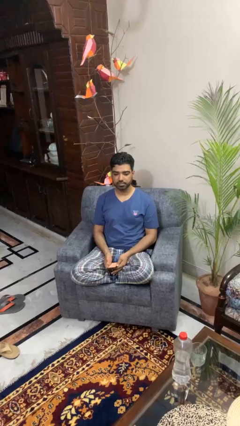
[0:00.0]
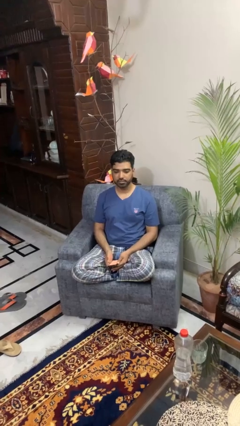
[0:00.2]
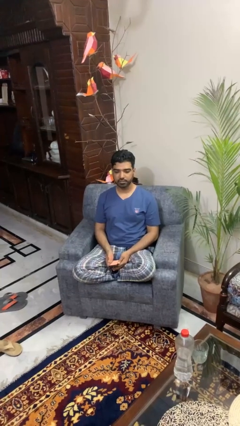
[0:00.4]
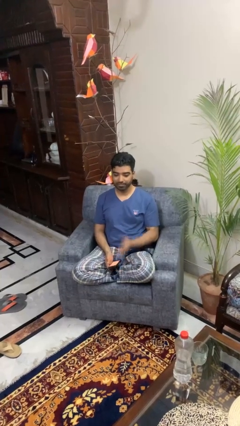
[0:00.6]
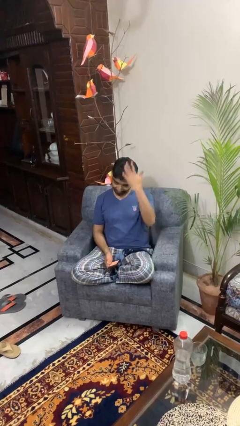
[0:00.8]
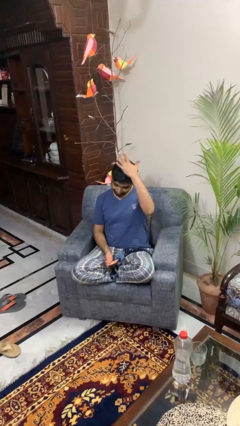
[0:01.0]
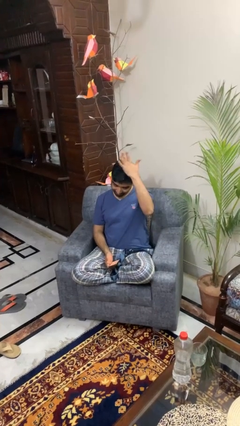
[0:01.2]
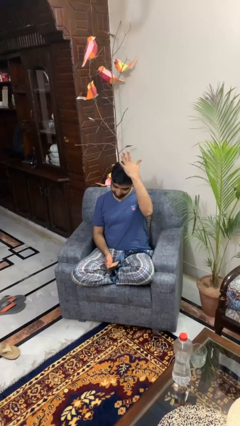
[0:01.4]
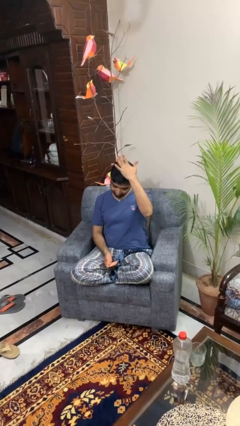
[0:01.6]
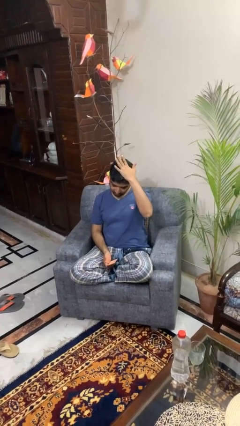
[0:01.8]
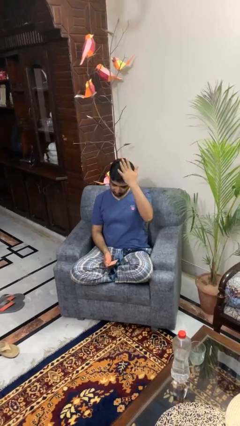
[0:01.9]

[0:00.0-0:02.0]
person pats head

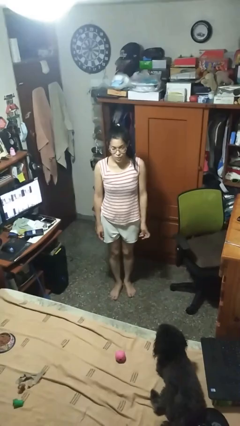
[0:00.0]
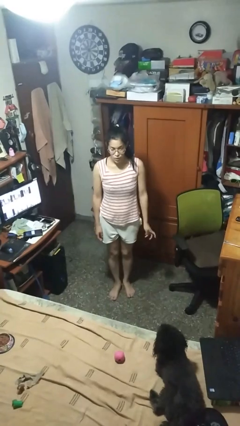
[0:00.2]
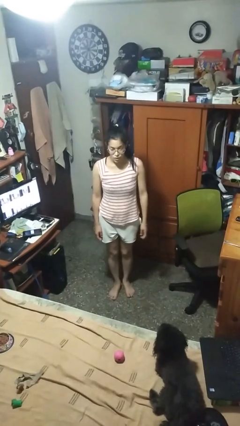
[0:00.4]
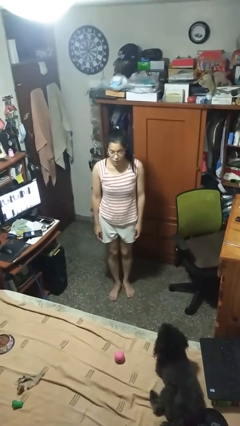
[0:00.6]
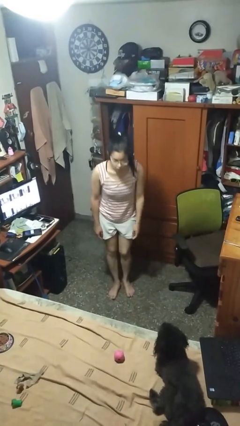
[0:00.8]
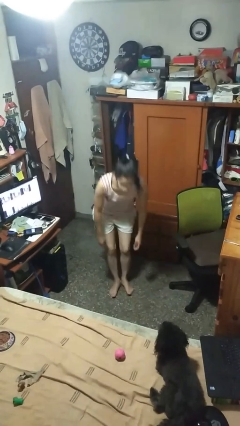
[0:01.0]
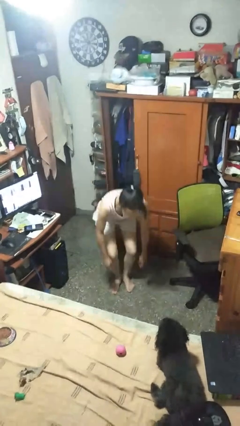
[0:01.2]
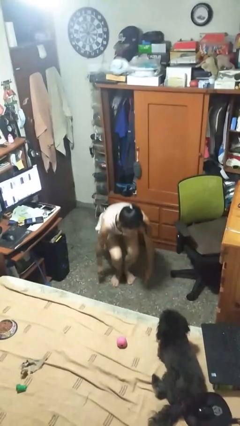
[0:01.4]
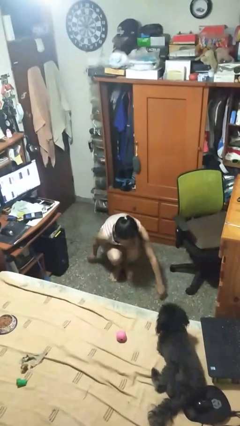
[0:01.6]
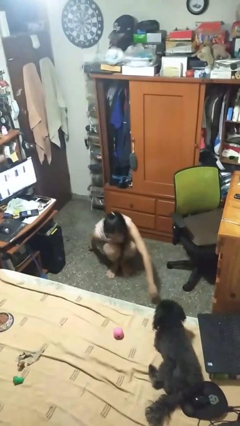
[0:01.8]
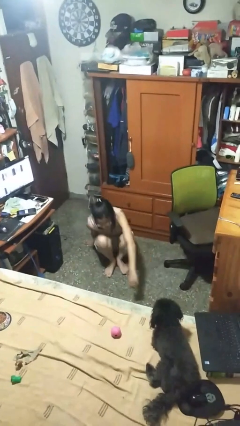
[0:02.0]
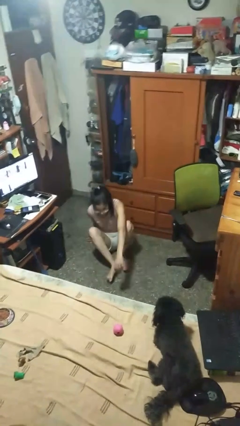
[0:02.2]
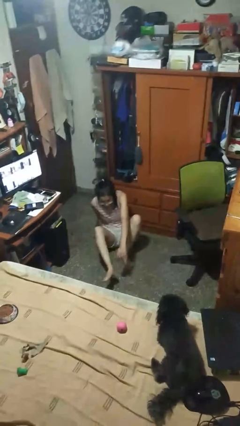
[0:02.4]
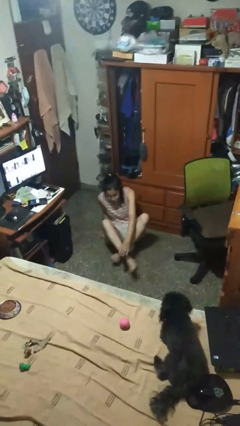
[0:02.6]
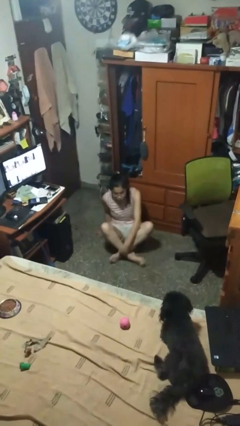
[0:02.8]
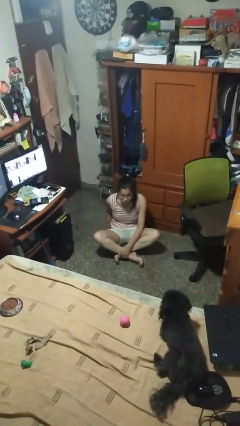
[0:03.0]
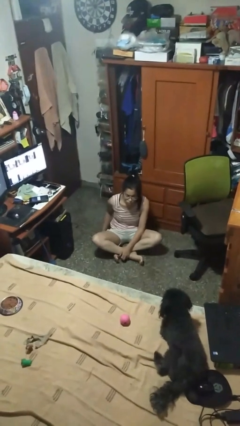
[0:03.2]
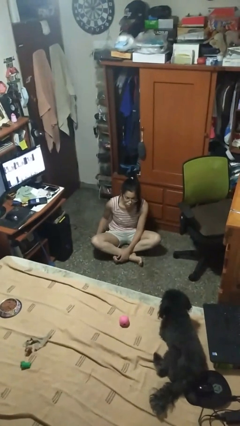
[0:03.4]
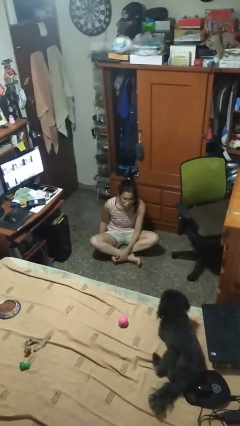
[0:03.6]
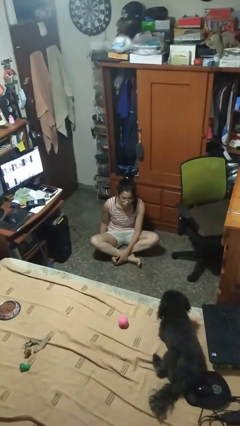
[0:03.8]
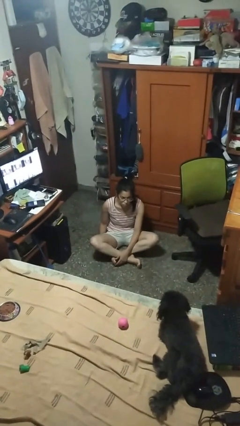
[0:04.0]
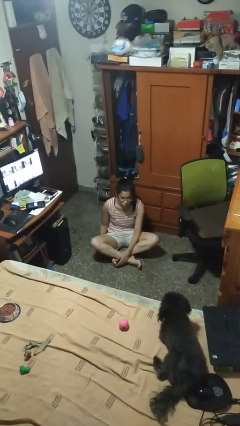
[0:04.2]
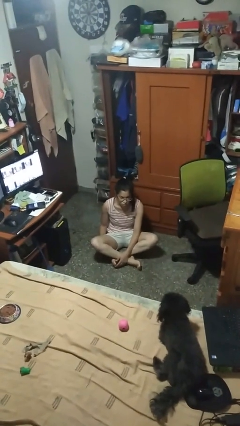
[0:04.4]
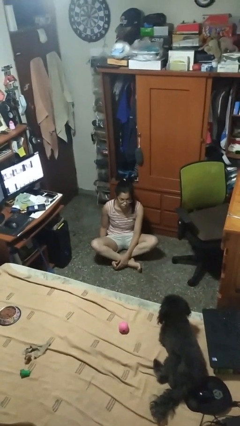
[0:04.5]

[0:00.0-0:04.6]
person sits crisscross

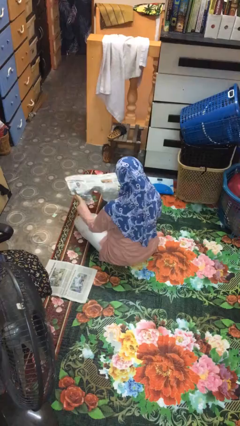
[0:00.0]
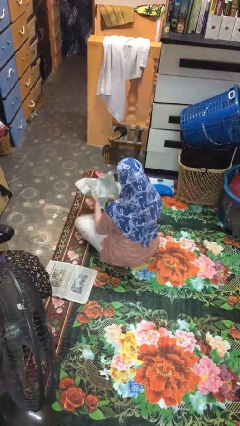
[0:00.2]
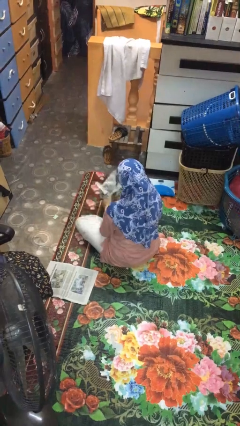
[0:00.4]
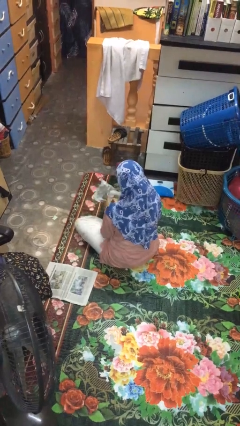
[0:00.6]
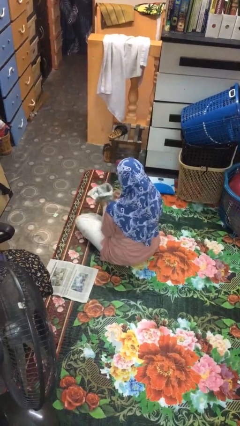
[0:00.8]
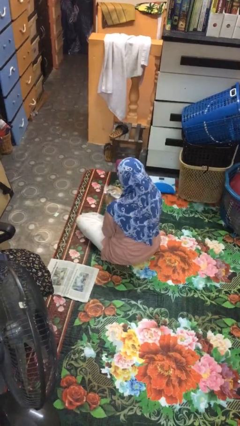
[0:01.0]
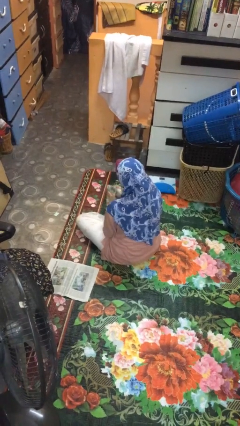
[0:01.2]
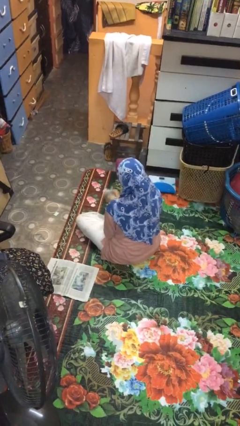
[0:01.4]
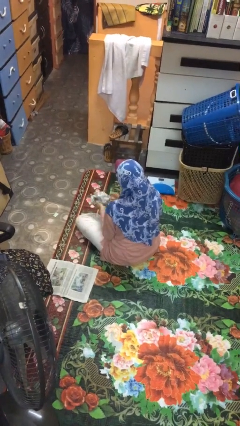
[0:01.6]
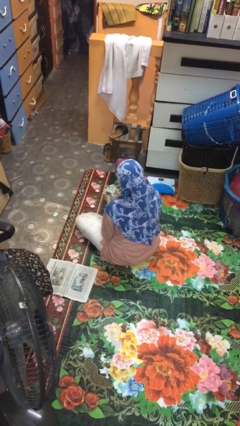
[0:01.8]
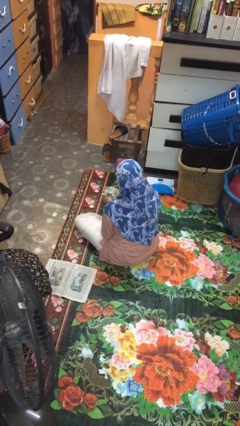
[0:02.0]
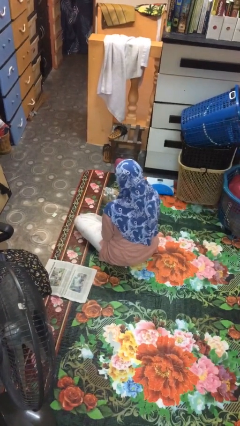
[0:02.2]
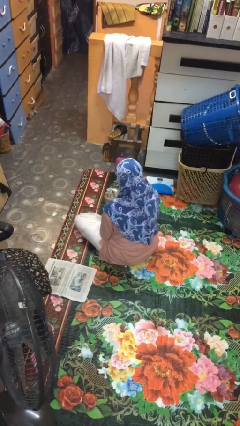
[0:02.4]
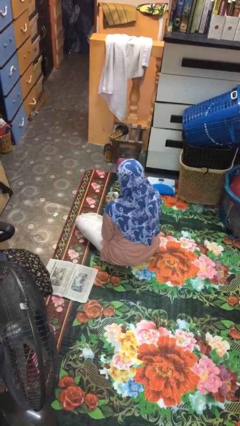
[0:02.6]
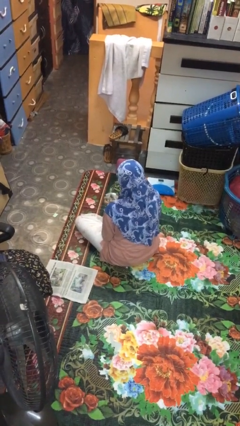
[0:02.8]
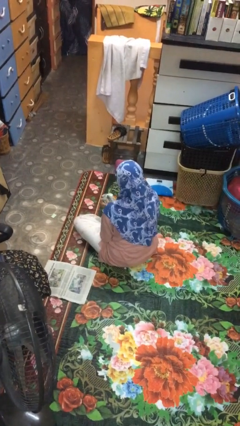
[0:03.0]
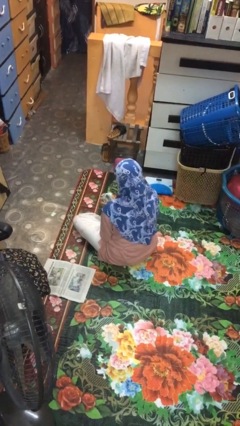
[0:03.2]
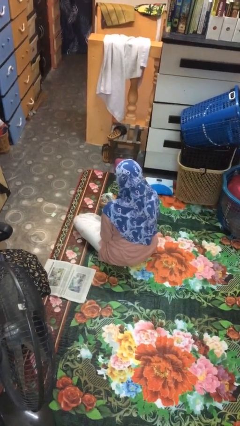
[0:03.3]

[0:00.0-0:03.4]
person crumples paper

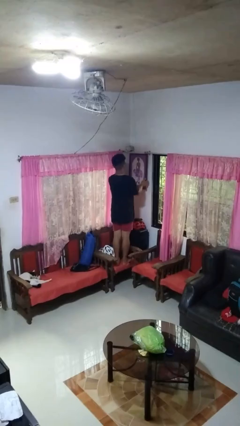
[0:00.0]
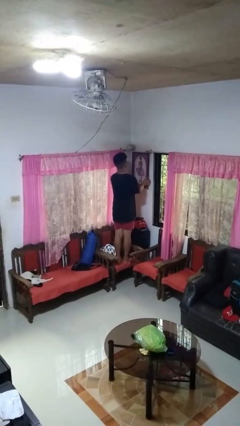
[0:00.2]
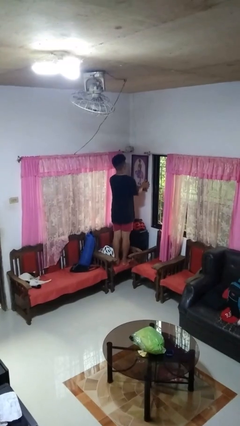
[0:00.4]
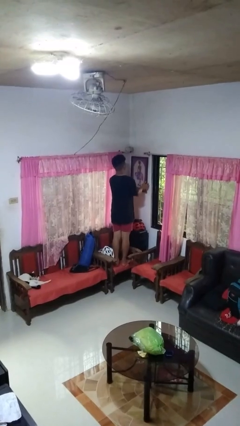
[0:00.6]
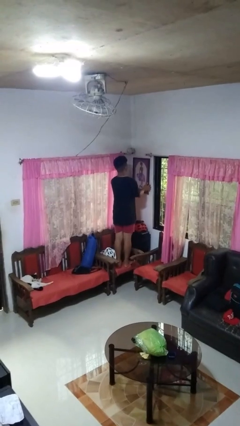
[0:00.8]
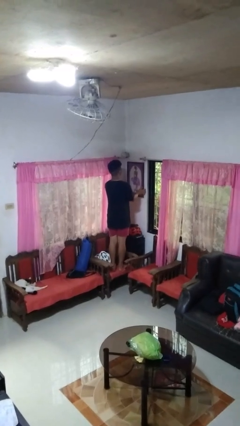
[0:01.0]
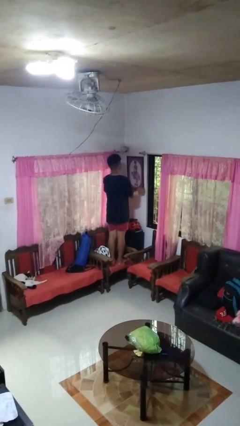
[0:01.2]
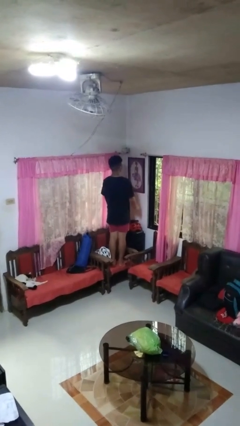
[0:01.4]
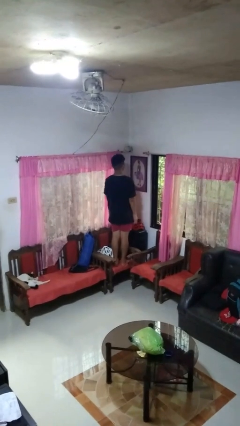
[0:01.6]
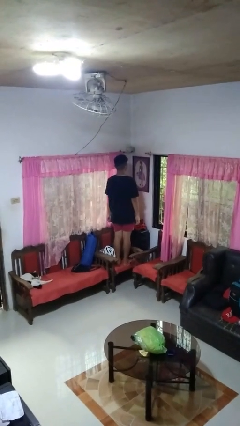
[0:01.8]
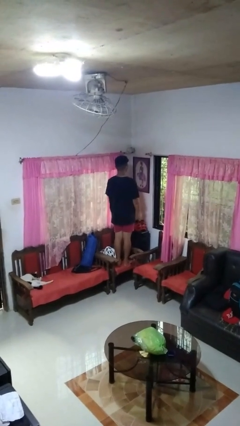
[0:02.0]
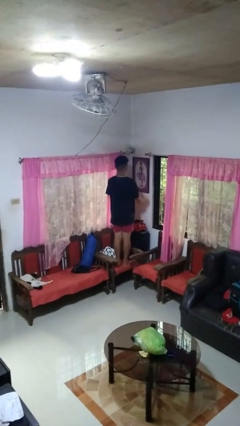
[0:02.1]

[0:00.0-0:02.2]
person puts up picture frame

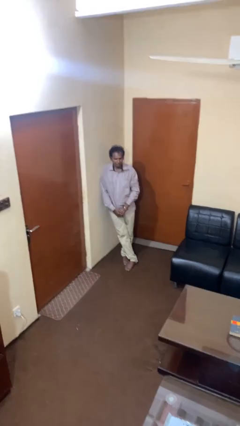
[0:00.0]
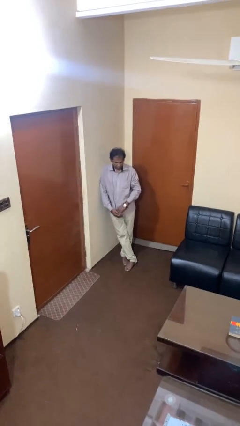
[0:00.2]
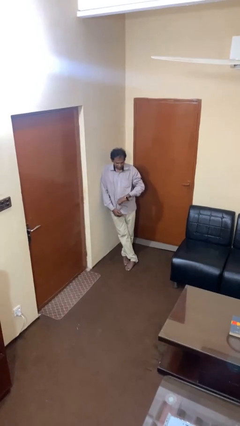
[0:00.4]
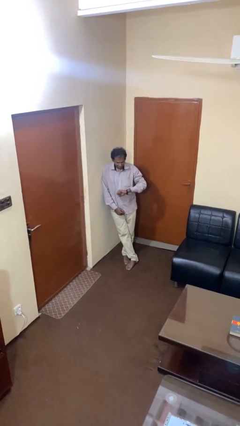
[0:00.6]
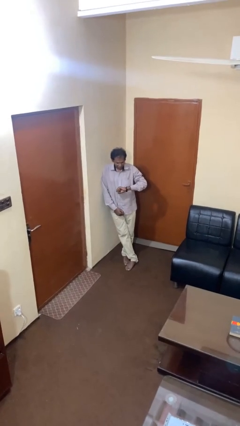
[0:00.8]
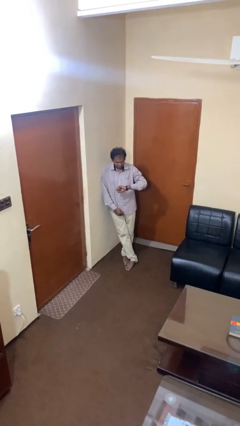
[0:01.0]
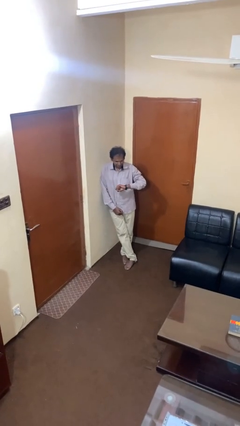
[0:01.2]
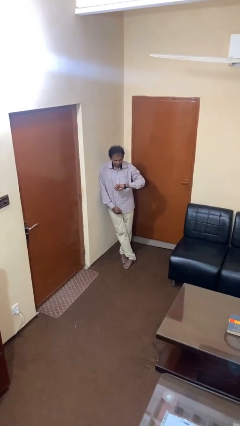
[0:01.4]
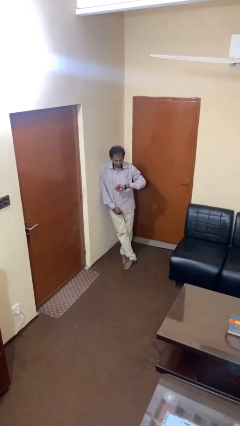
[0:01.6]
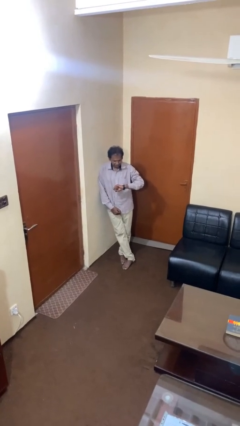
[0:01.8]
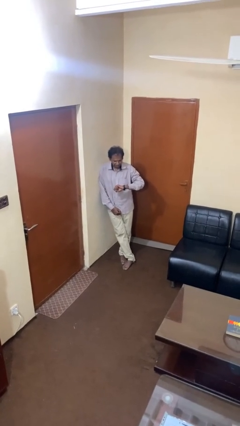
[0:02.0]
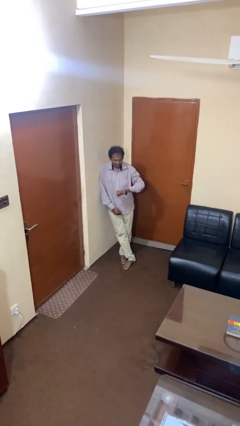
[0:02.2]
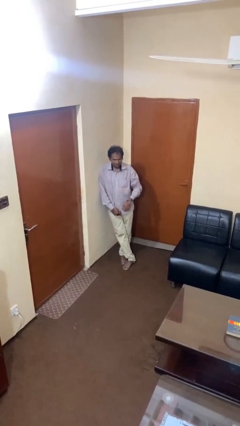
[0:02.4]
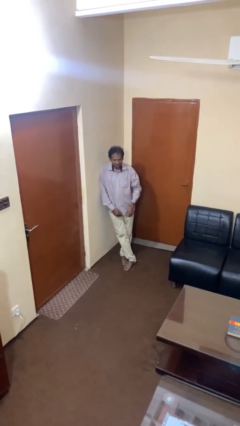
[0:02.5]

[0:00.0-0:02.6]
person looks at wristwatch

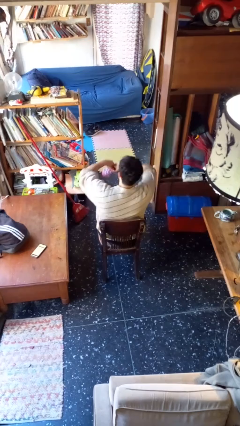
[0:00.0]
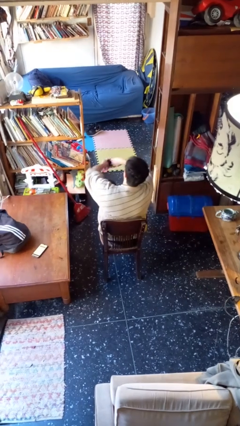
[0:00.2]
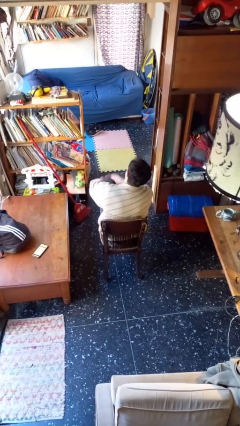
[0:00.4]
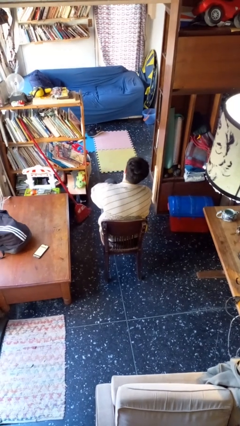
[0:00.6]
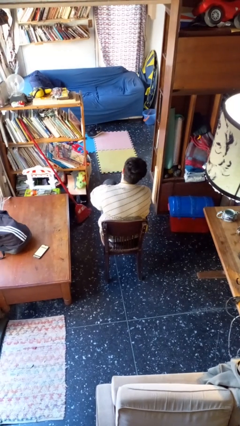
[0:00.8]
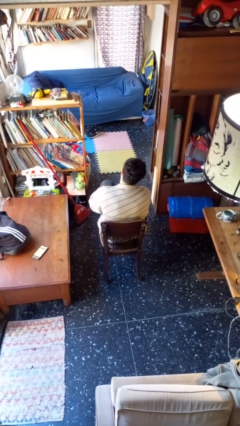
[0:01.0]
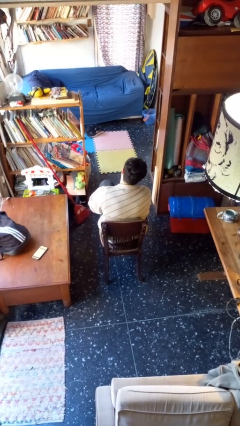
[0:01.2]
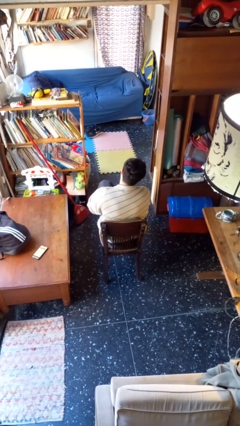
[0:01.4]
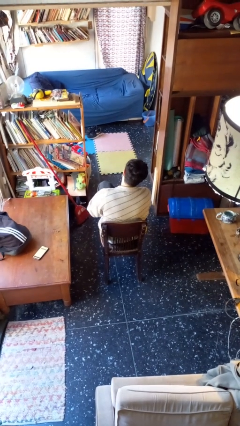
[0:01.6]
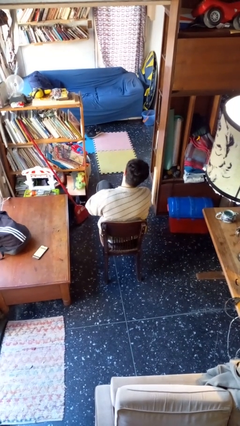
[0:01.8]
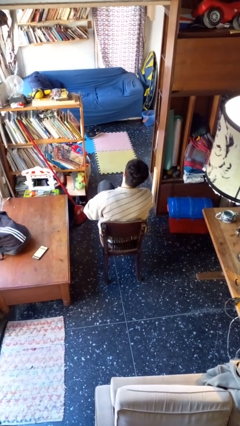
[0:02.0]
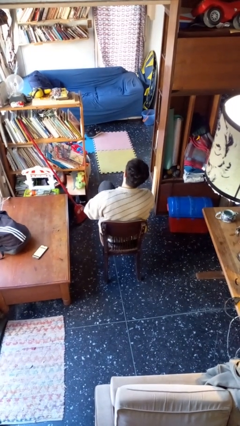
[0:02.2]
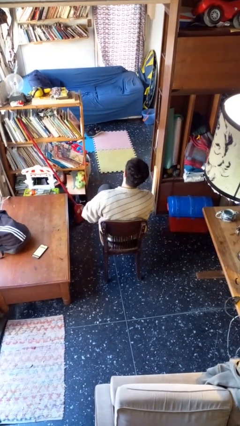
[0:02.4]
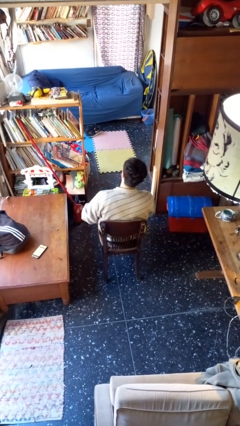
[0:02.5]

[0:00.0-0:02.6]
person puts on socks
